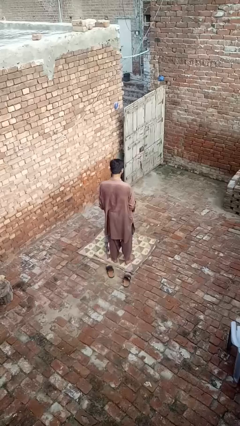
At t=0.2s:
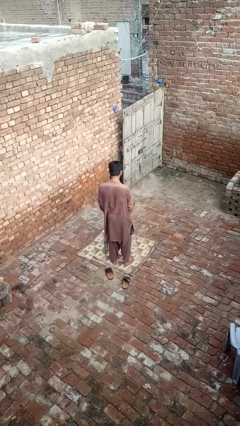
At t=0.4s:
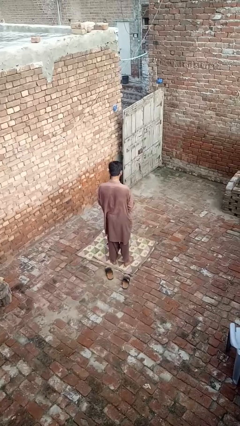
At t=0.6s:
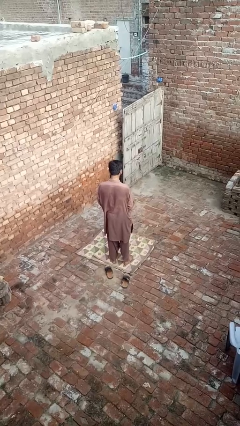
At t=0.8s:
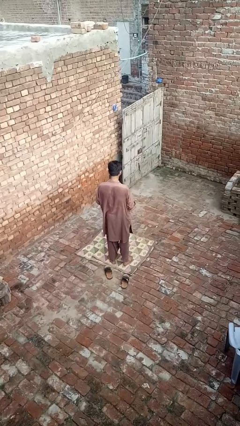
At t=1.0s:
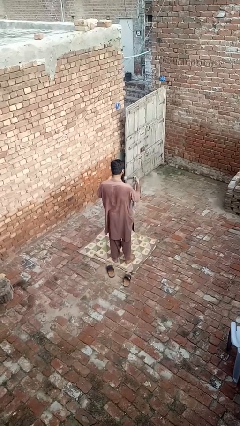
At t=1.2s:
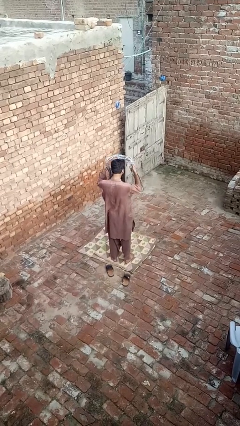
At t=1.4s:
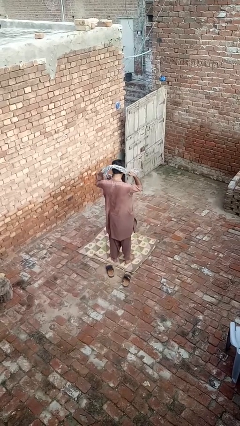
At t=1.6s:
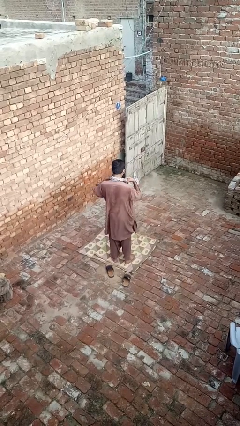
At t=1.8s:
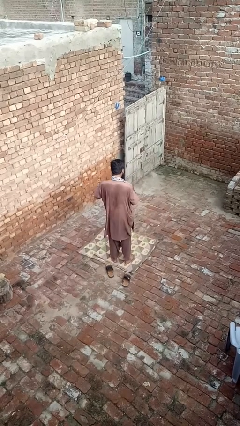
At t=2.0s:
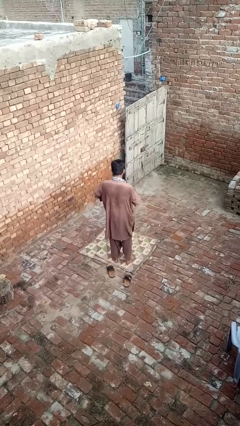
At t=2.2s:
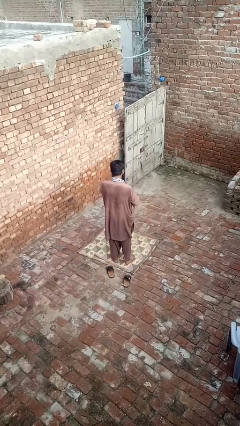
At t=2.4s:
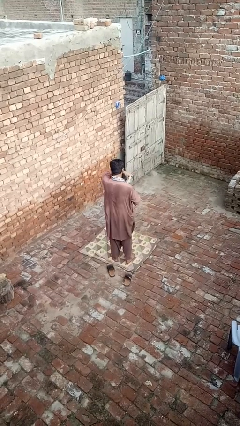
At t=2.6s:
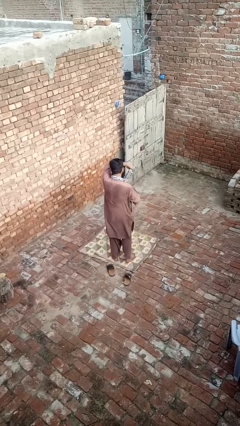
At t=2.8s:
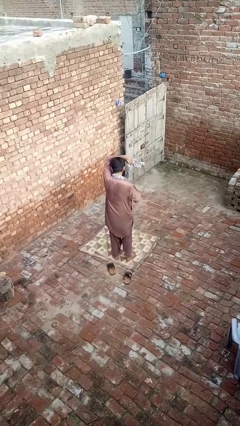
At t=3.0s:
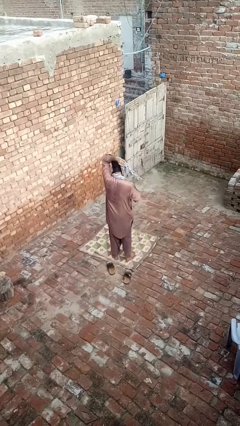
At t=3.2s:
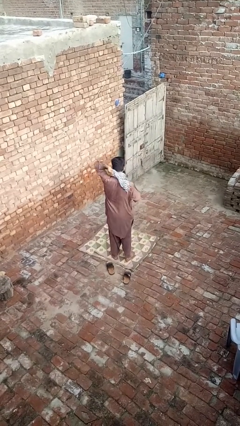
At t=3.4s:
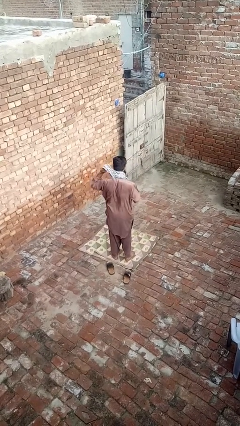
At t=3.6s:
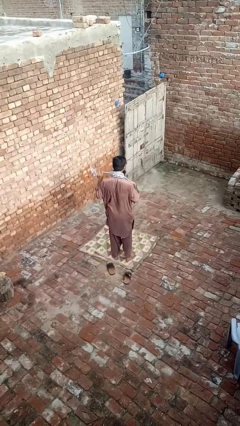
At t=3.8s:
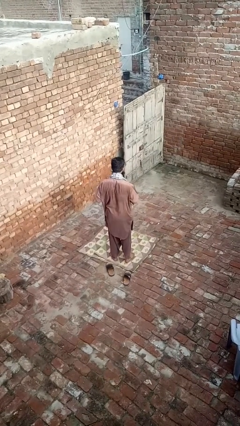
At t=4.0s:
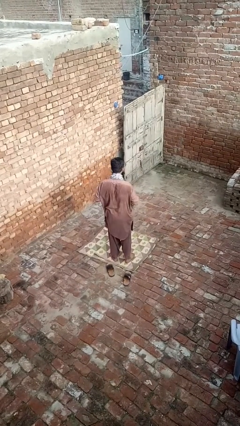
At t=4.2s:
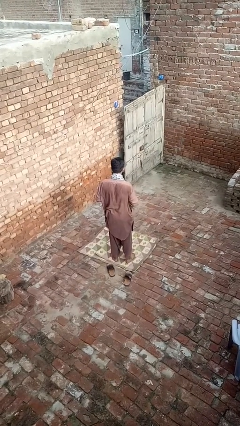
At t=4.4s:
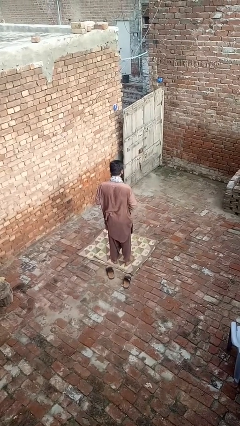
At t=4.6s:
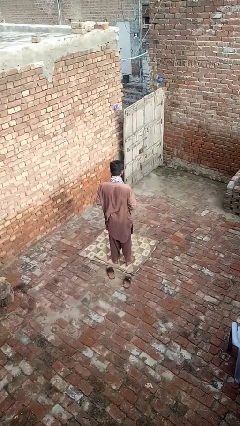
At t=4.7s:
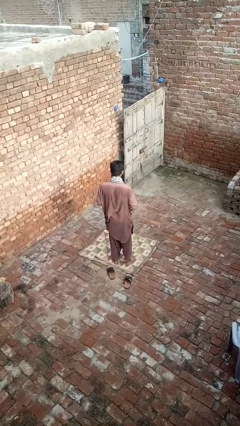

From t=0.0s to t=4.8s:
person puts on scarf

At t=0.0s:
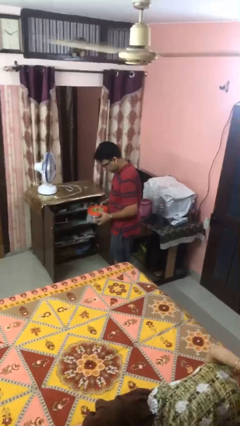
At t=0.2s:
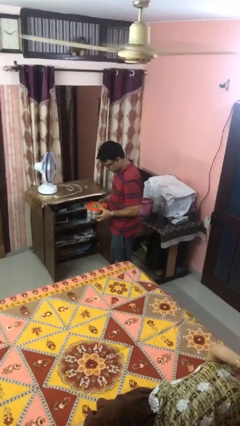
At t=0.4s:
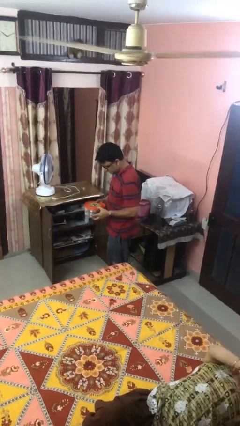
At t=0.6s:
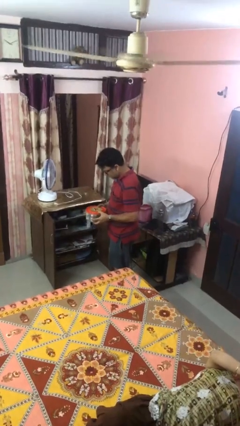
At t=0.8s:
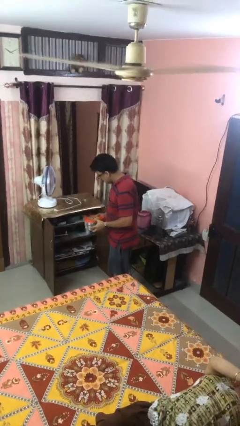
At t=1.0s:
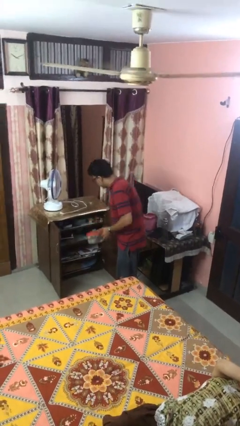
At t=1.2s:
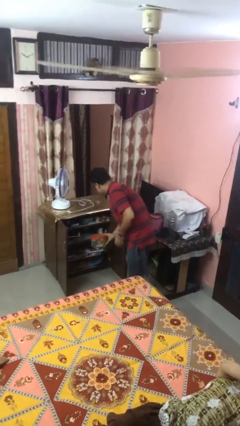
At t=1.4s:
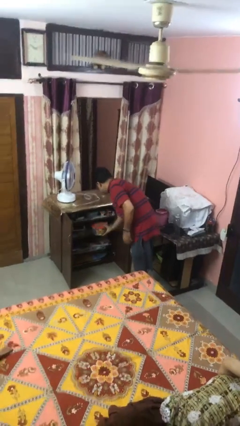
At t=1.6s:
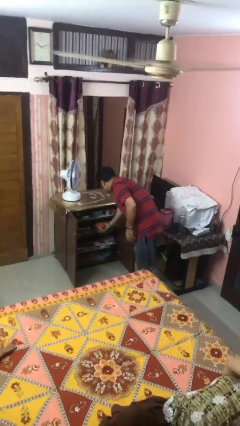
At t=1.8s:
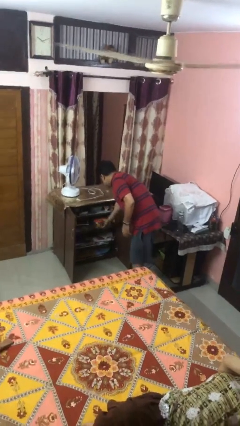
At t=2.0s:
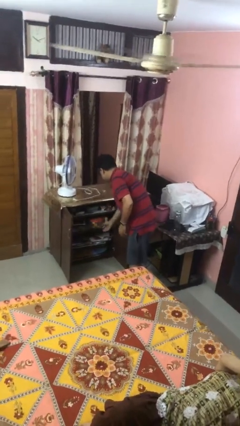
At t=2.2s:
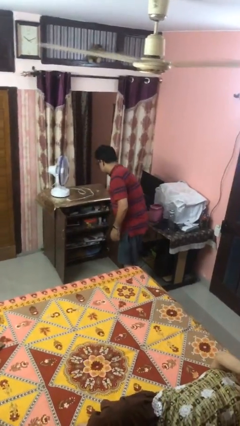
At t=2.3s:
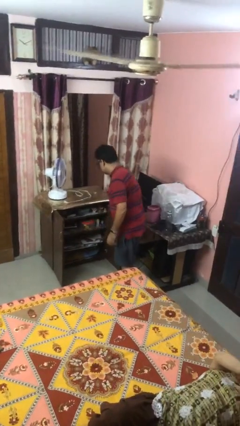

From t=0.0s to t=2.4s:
person puts down object into cabinet

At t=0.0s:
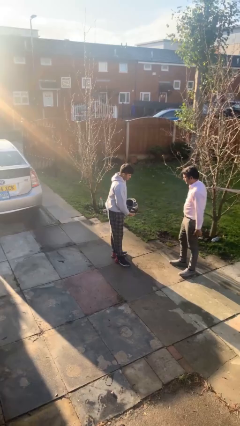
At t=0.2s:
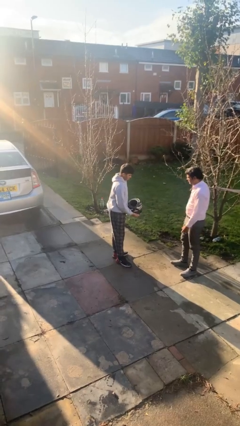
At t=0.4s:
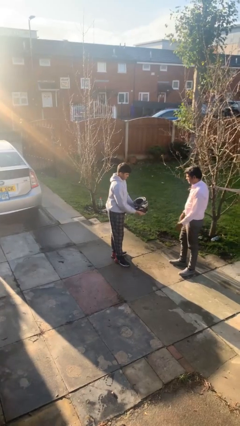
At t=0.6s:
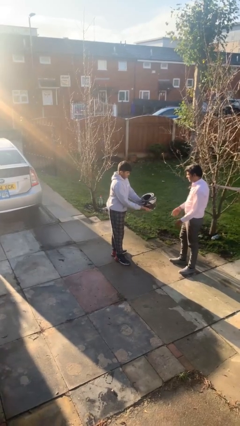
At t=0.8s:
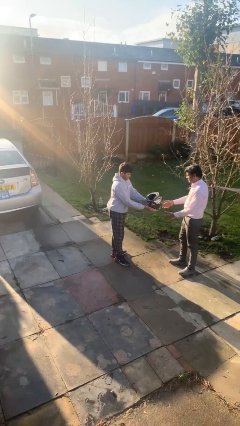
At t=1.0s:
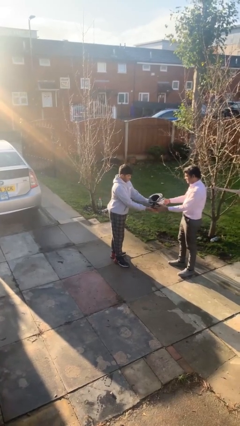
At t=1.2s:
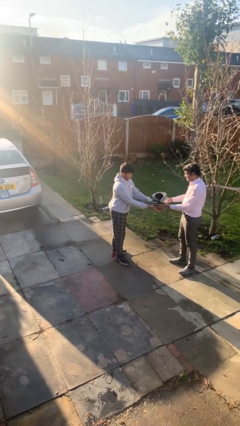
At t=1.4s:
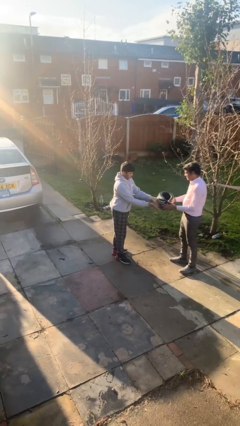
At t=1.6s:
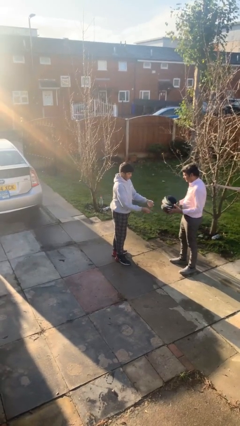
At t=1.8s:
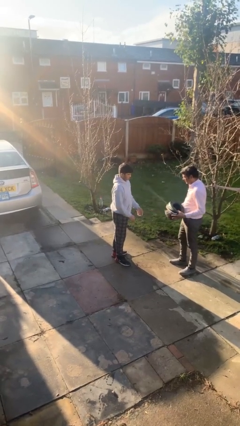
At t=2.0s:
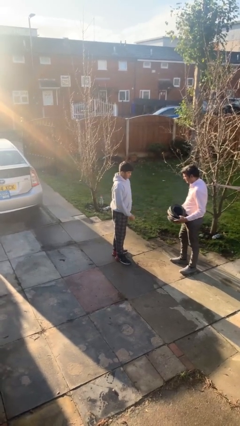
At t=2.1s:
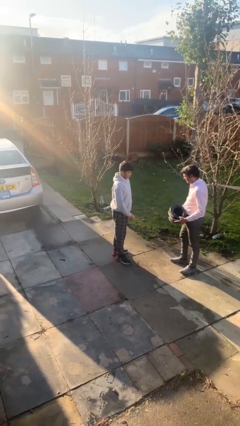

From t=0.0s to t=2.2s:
person transfers object to person

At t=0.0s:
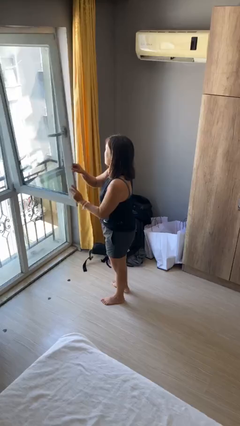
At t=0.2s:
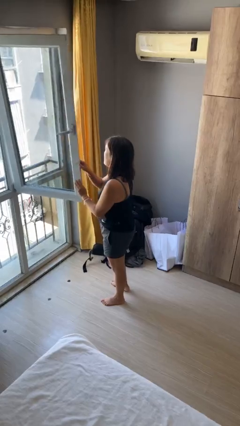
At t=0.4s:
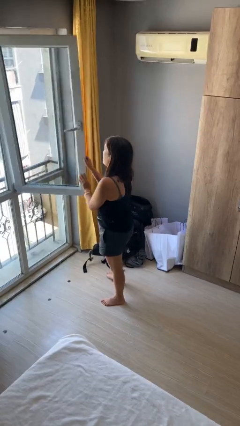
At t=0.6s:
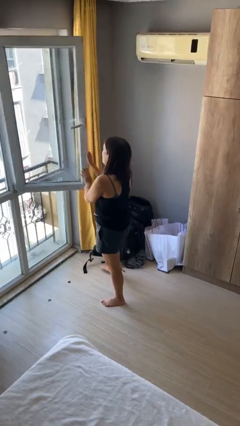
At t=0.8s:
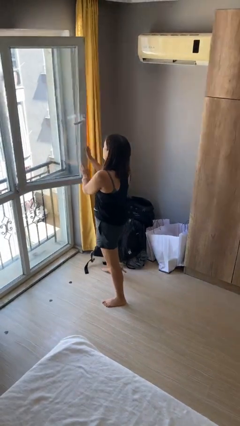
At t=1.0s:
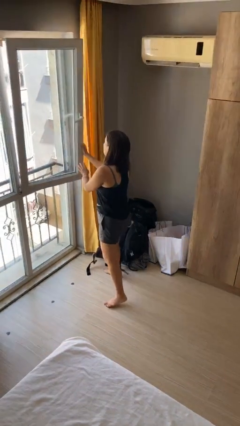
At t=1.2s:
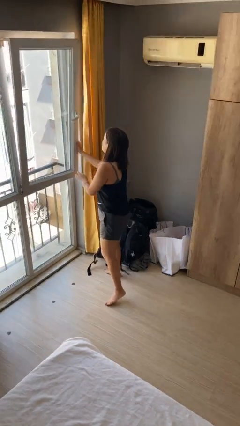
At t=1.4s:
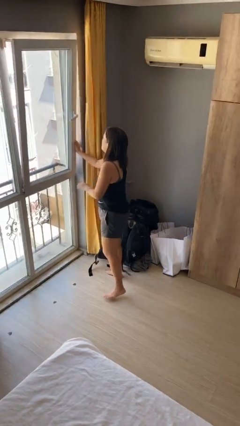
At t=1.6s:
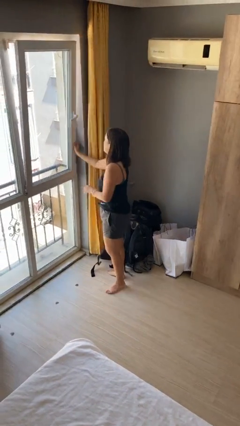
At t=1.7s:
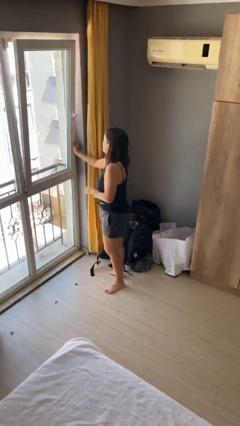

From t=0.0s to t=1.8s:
person closes home window

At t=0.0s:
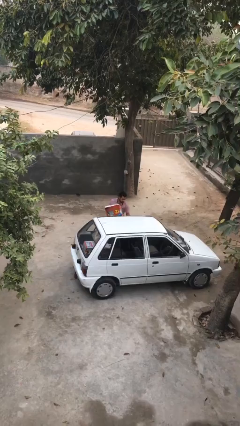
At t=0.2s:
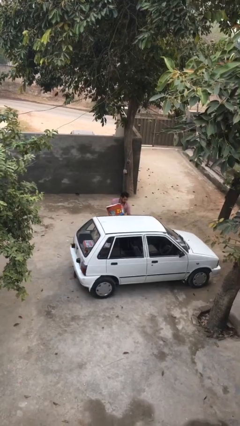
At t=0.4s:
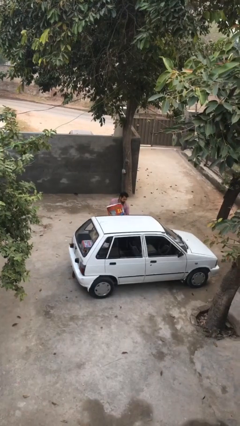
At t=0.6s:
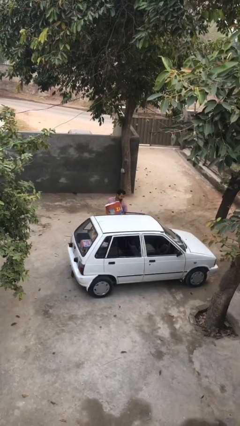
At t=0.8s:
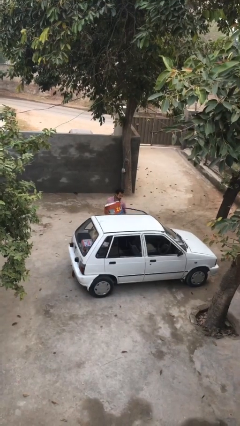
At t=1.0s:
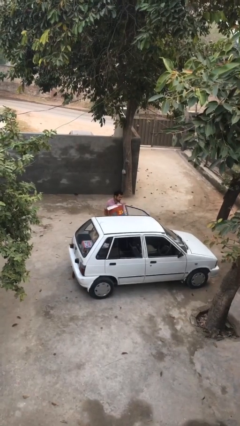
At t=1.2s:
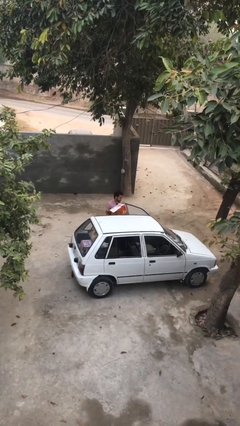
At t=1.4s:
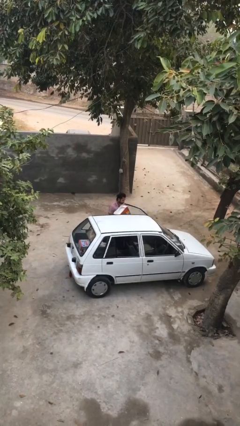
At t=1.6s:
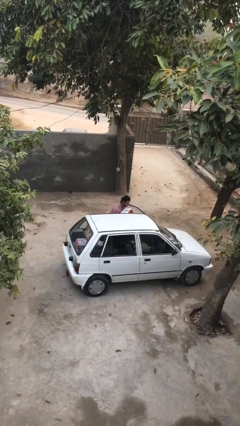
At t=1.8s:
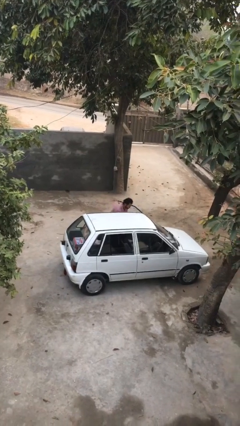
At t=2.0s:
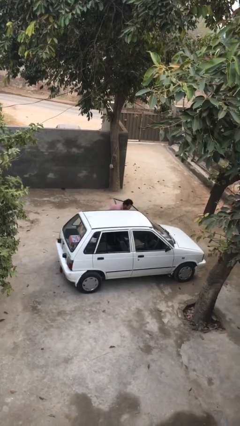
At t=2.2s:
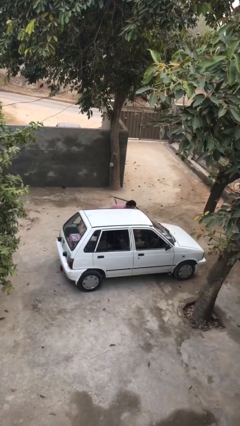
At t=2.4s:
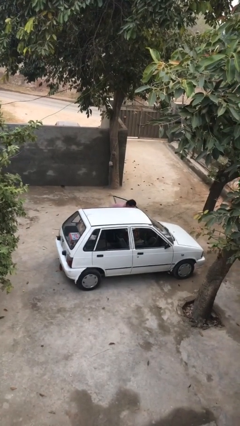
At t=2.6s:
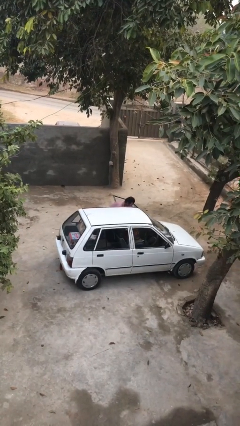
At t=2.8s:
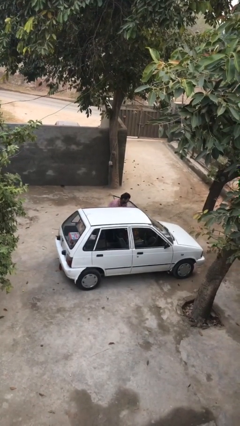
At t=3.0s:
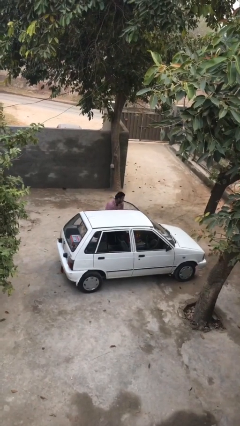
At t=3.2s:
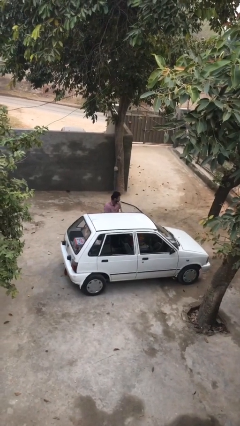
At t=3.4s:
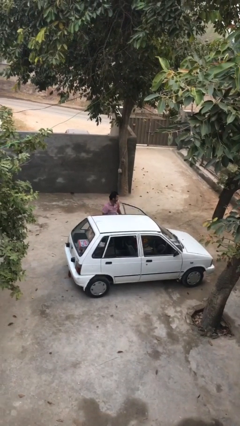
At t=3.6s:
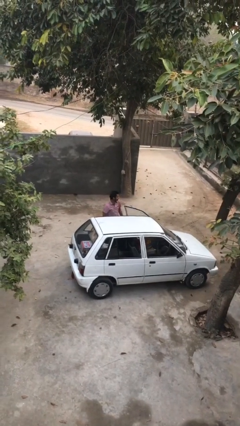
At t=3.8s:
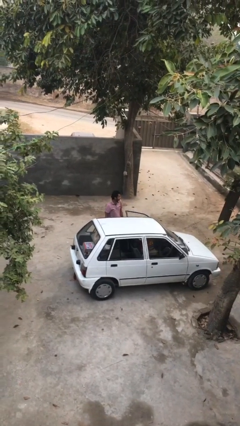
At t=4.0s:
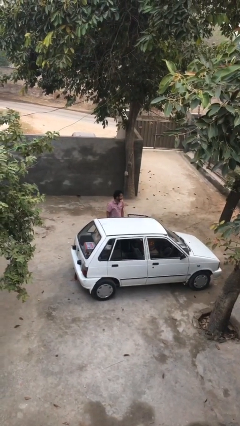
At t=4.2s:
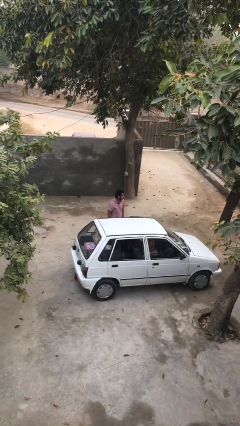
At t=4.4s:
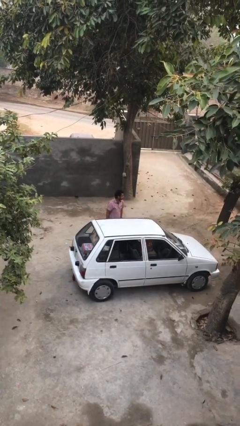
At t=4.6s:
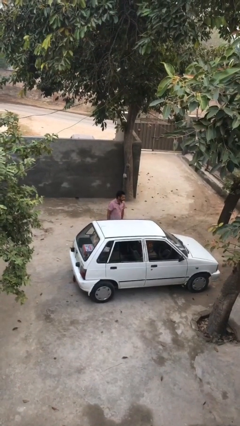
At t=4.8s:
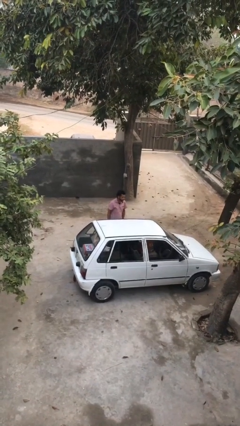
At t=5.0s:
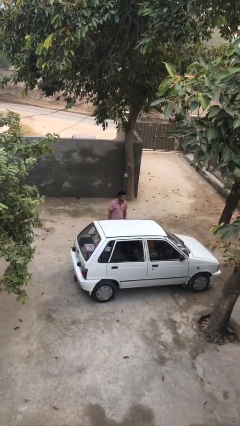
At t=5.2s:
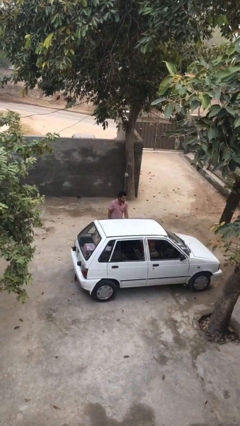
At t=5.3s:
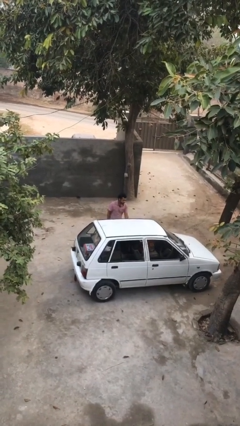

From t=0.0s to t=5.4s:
person loads car

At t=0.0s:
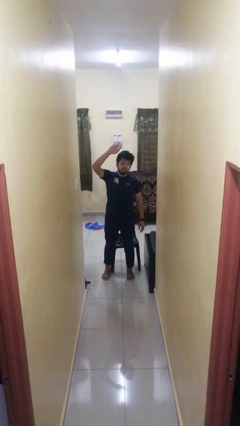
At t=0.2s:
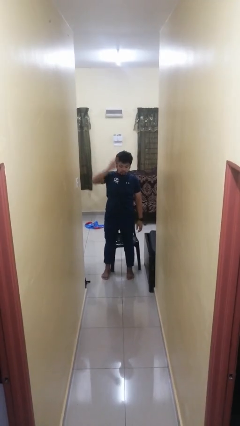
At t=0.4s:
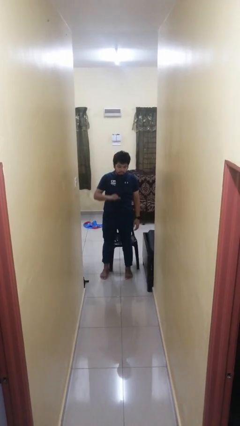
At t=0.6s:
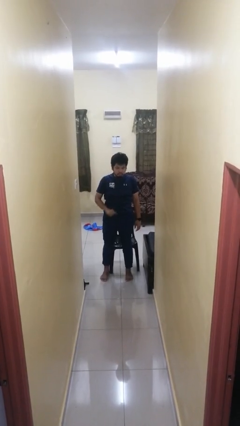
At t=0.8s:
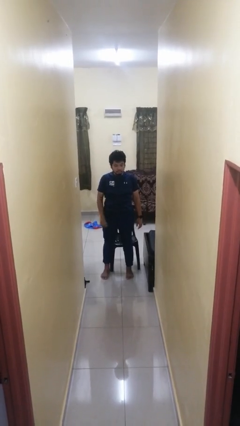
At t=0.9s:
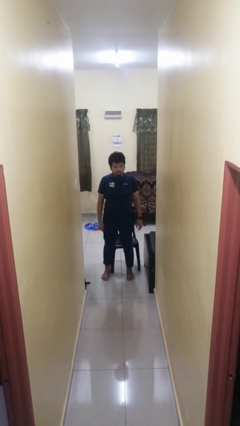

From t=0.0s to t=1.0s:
person gestures swipe down
